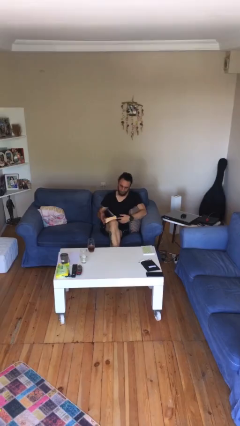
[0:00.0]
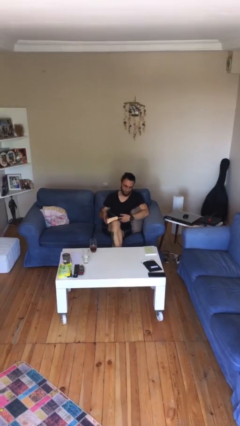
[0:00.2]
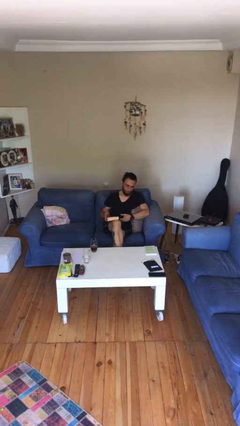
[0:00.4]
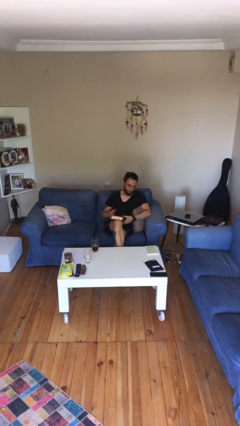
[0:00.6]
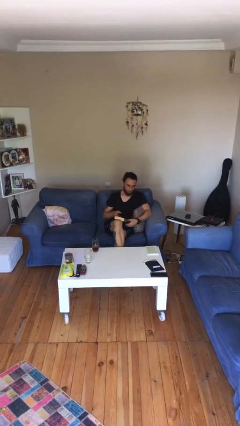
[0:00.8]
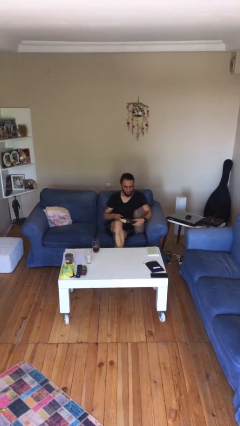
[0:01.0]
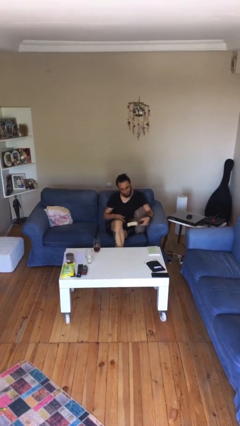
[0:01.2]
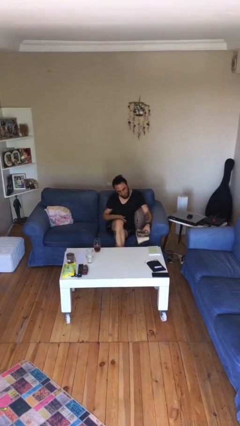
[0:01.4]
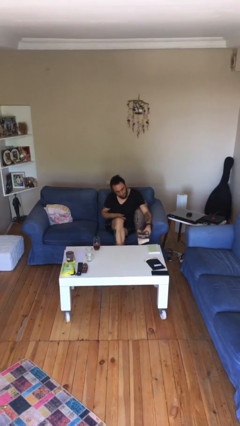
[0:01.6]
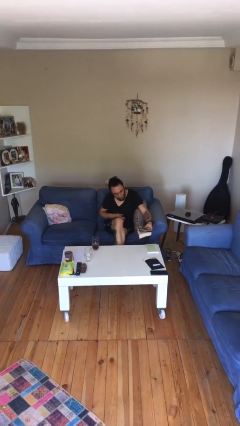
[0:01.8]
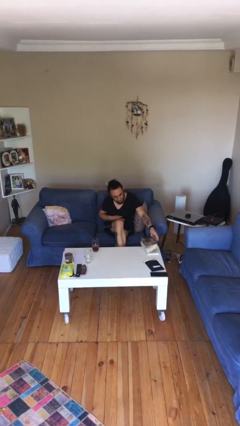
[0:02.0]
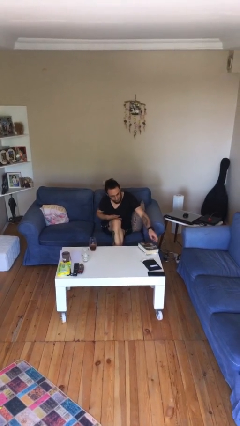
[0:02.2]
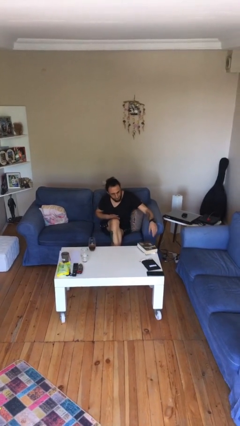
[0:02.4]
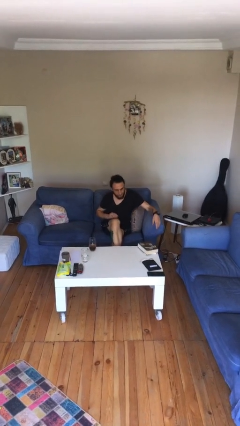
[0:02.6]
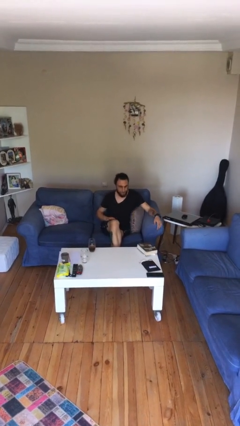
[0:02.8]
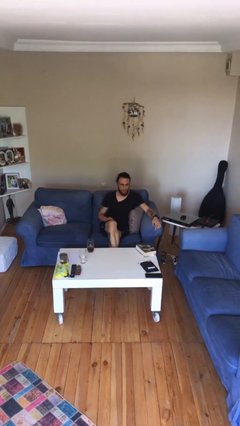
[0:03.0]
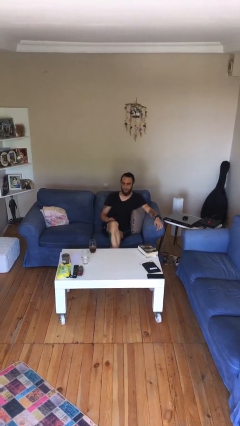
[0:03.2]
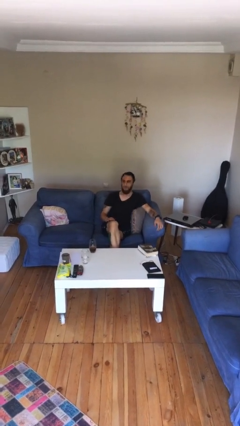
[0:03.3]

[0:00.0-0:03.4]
person puts down object on table

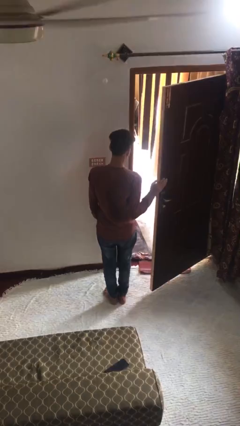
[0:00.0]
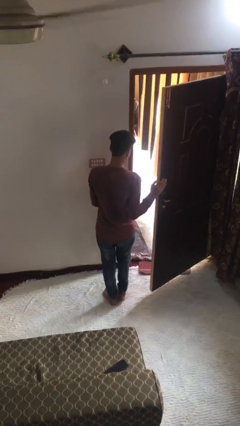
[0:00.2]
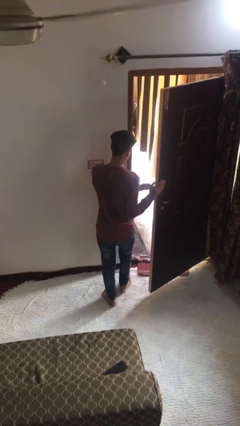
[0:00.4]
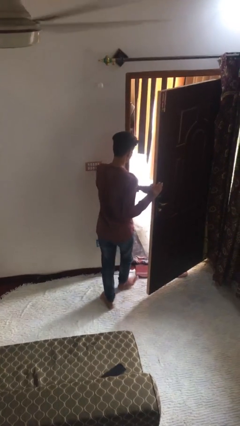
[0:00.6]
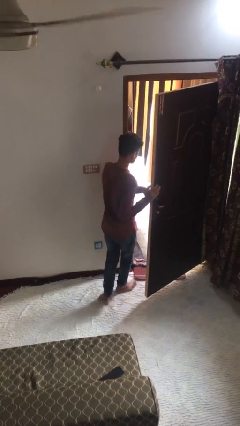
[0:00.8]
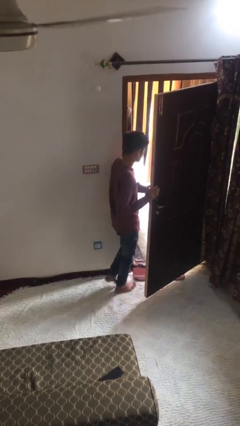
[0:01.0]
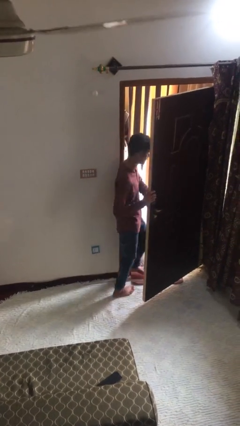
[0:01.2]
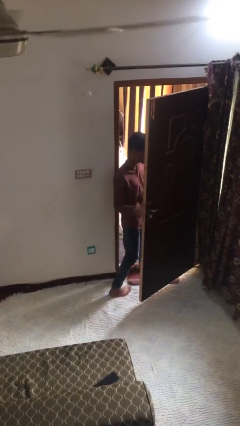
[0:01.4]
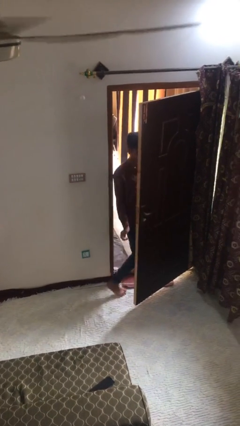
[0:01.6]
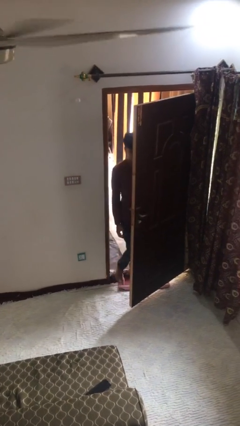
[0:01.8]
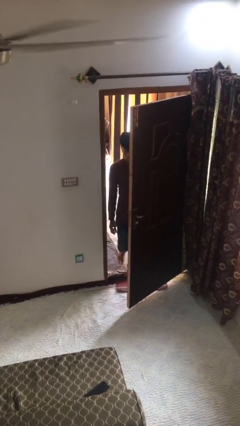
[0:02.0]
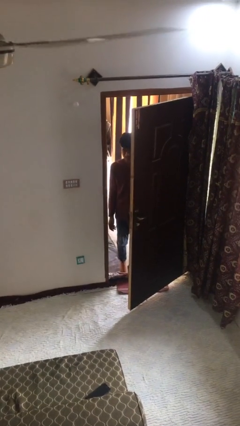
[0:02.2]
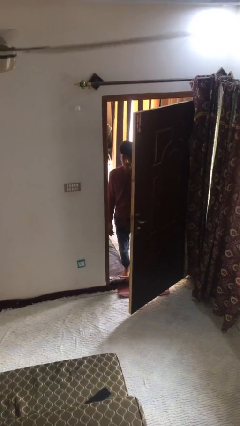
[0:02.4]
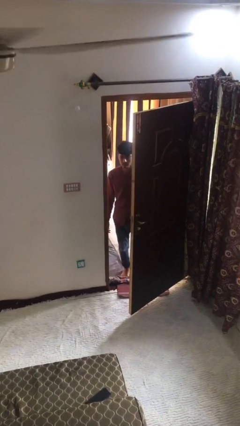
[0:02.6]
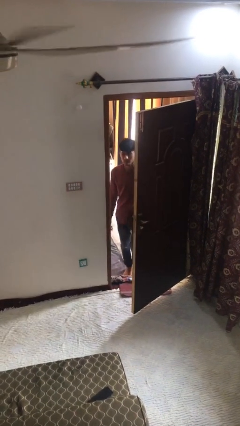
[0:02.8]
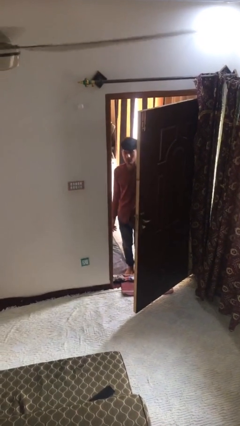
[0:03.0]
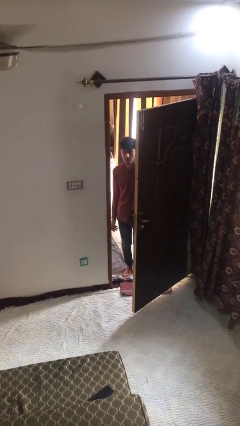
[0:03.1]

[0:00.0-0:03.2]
person exits scene through structure

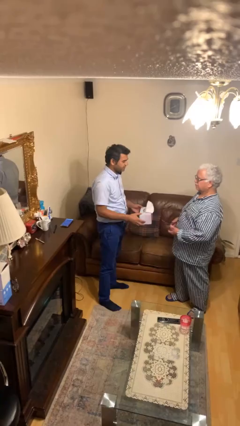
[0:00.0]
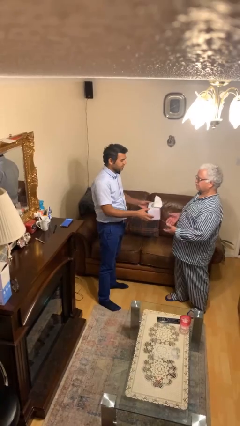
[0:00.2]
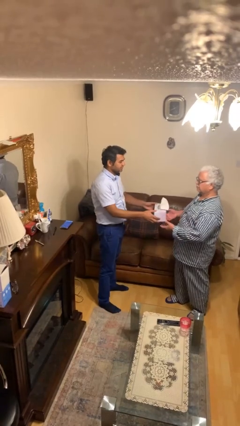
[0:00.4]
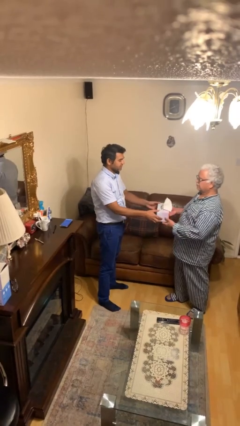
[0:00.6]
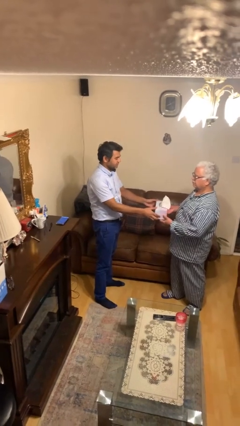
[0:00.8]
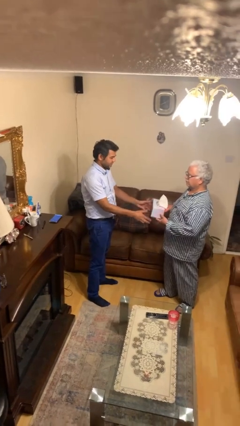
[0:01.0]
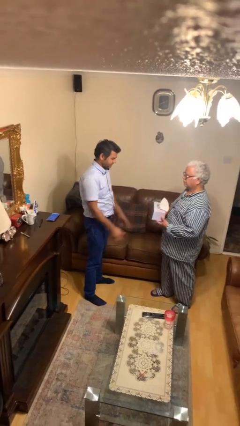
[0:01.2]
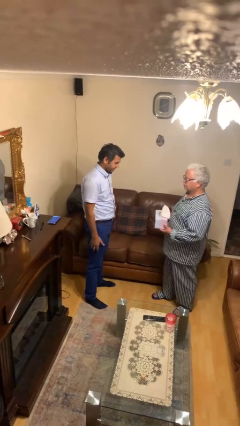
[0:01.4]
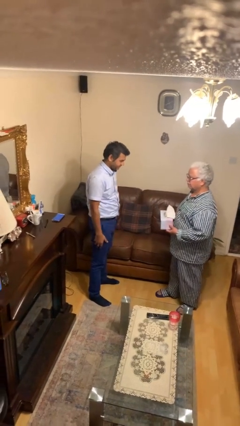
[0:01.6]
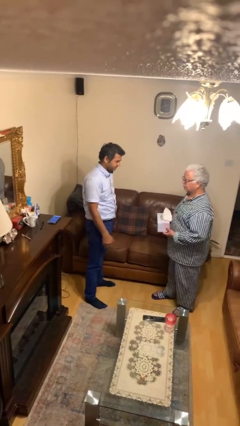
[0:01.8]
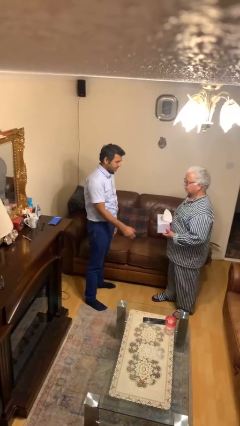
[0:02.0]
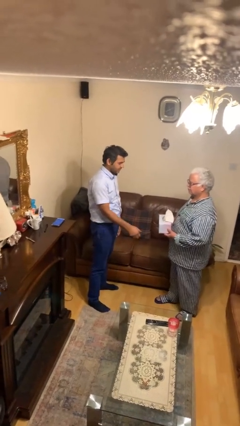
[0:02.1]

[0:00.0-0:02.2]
person transfers object to person

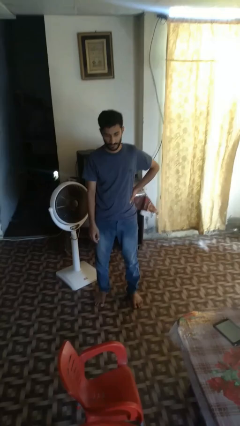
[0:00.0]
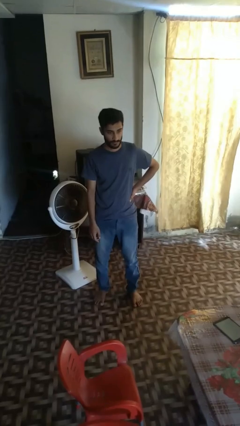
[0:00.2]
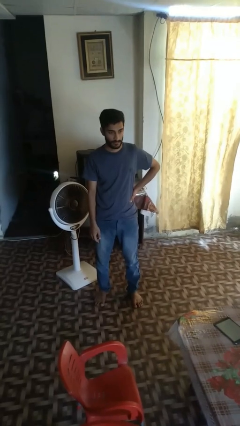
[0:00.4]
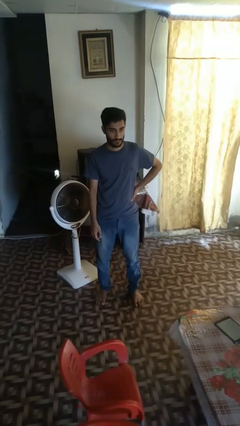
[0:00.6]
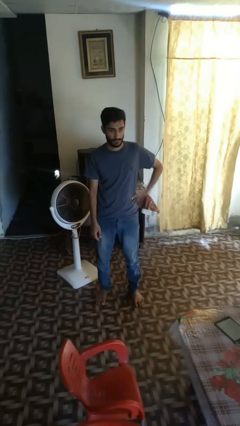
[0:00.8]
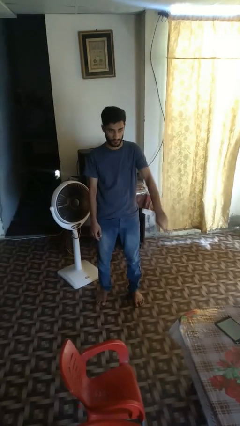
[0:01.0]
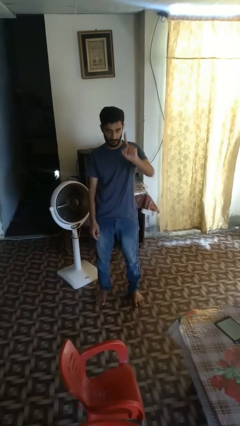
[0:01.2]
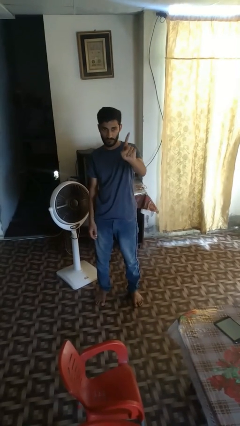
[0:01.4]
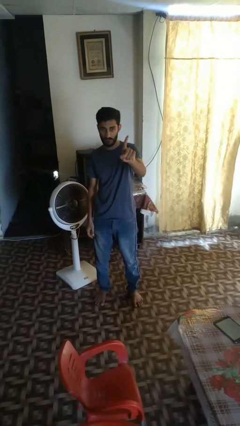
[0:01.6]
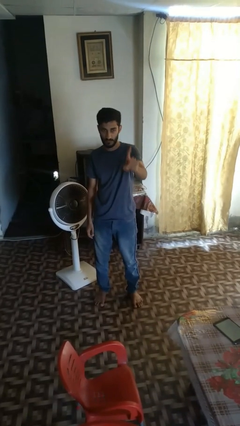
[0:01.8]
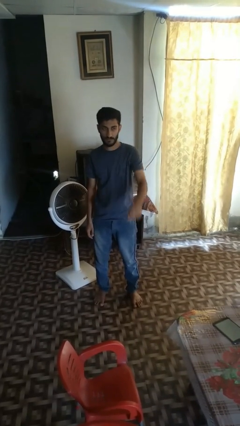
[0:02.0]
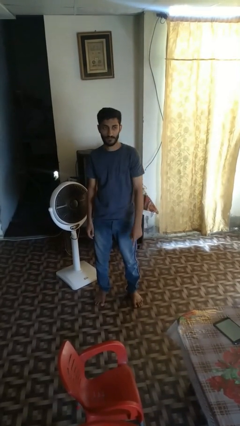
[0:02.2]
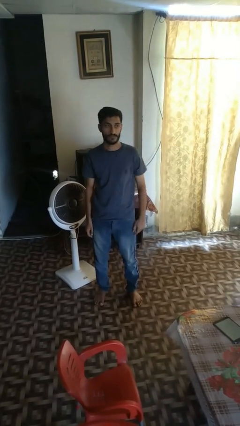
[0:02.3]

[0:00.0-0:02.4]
person gestures number one

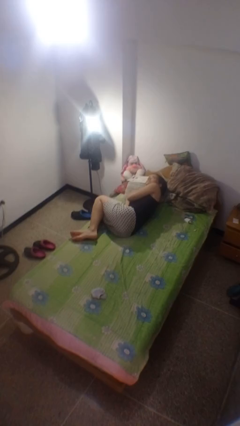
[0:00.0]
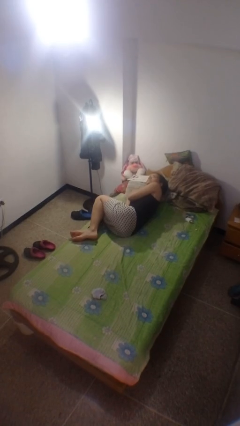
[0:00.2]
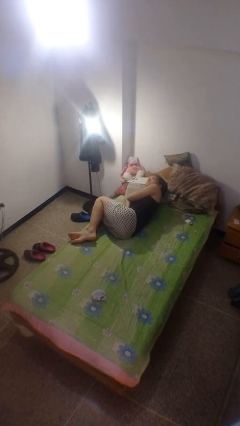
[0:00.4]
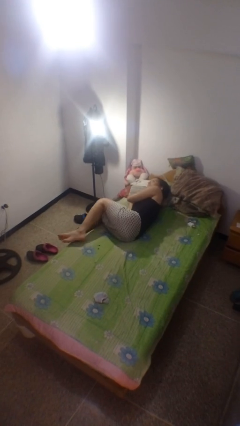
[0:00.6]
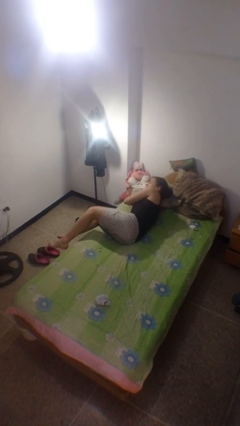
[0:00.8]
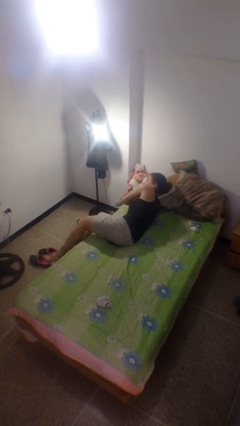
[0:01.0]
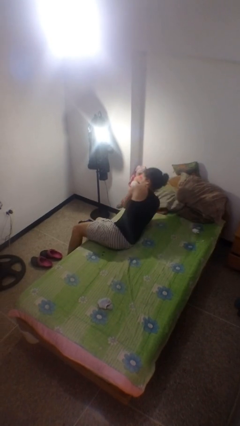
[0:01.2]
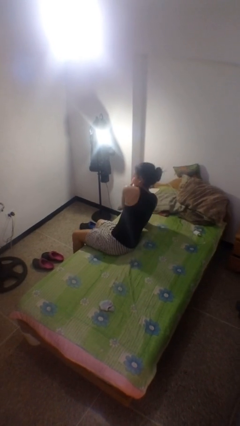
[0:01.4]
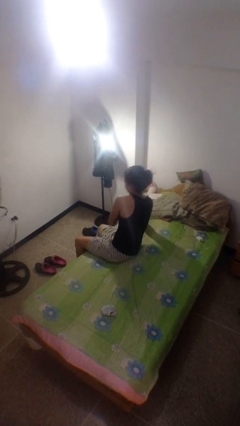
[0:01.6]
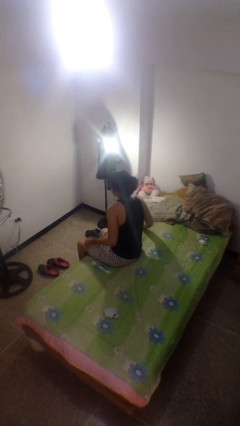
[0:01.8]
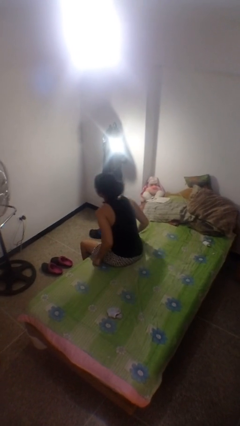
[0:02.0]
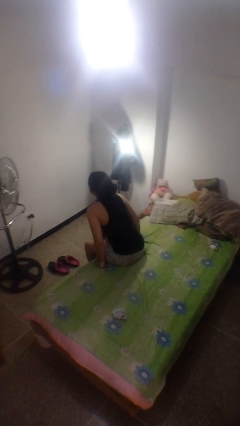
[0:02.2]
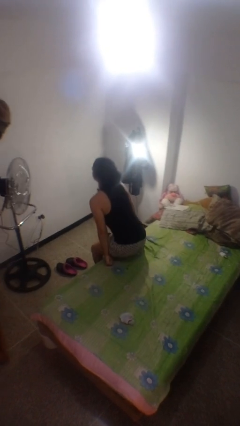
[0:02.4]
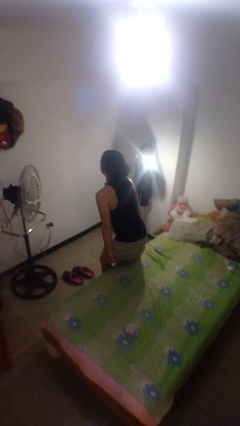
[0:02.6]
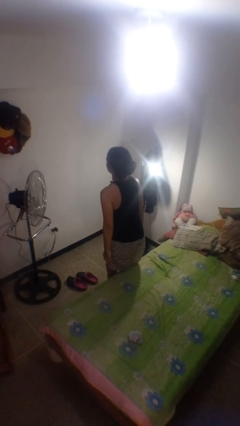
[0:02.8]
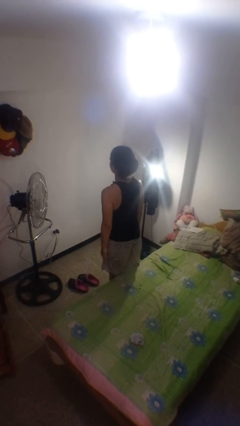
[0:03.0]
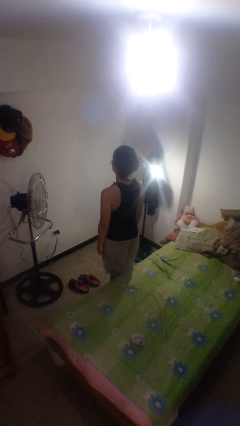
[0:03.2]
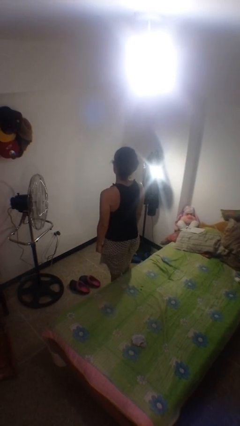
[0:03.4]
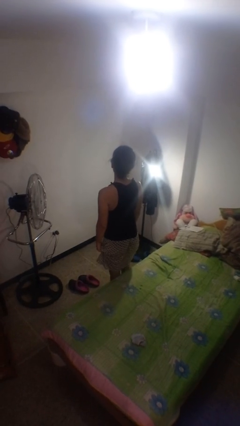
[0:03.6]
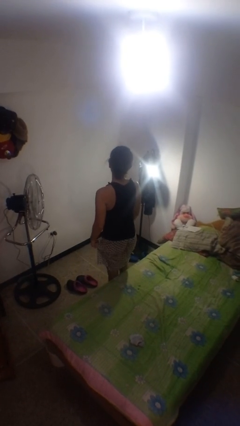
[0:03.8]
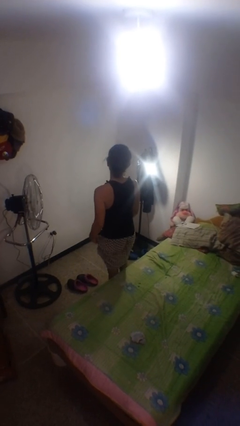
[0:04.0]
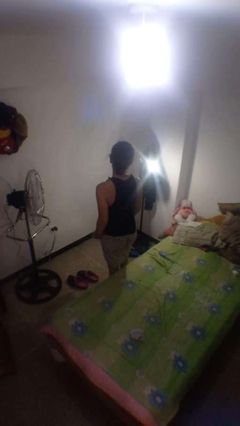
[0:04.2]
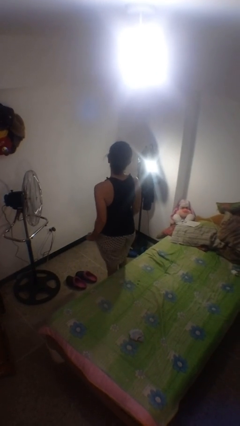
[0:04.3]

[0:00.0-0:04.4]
person stands up

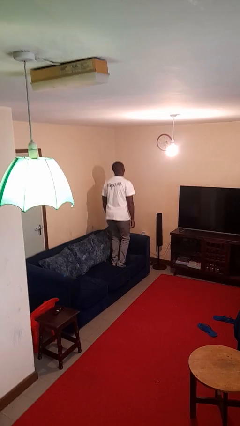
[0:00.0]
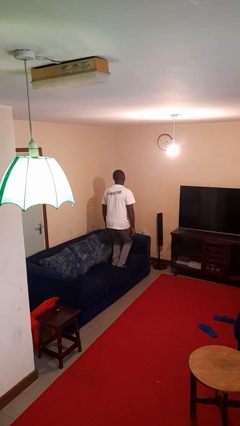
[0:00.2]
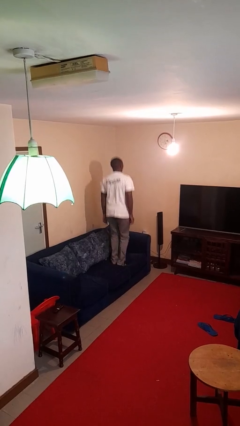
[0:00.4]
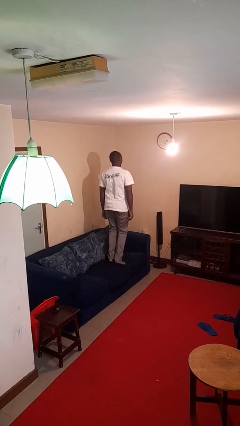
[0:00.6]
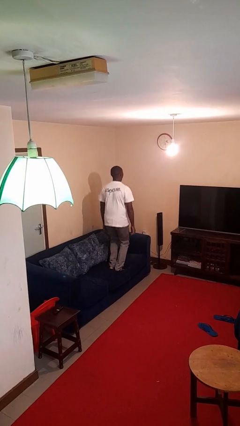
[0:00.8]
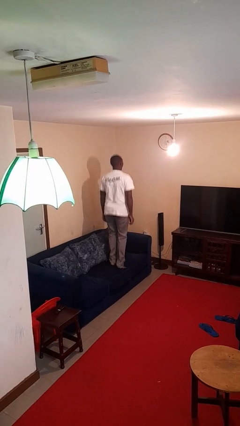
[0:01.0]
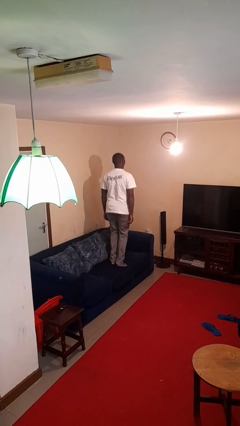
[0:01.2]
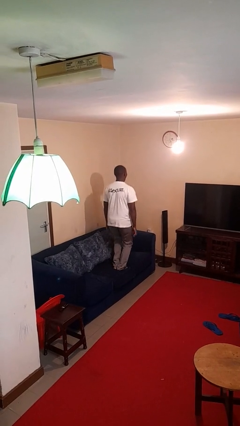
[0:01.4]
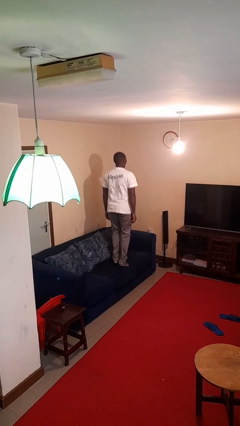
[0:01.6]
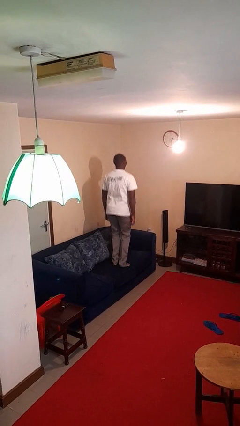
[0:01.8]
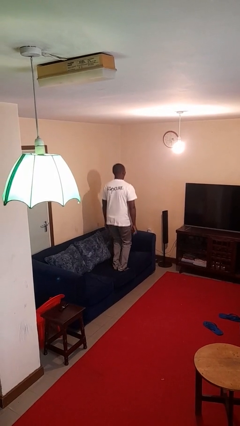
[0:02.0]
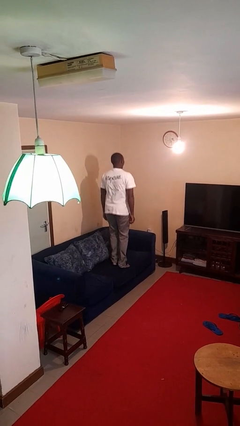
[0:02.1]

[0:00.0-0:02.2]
person jumps on couch
